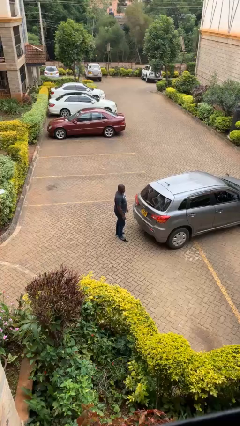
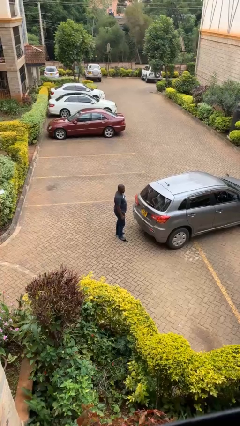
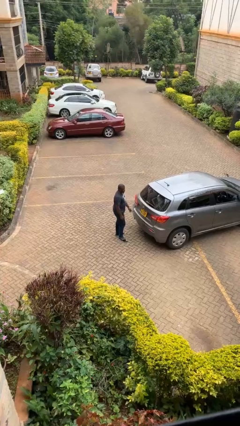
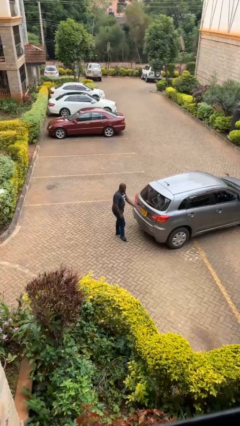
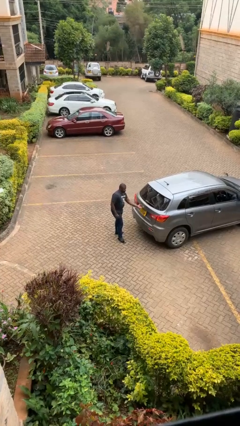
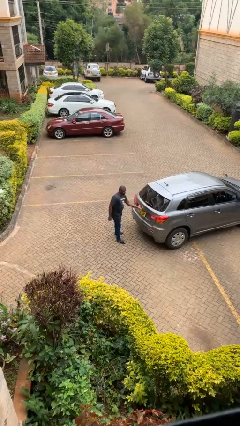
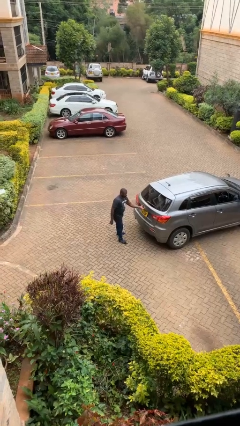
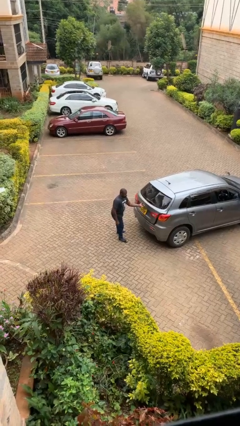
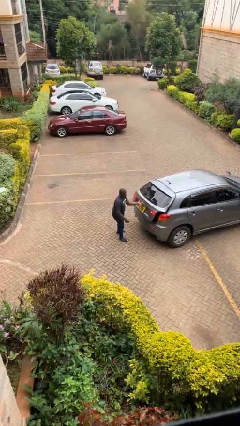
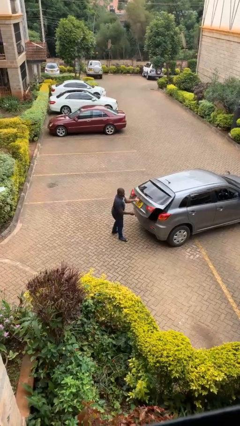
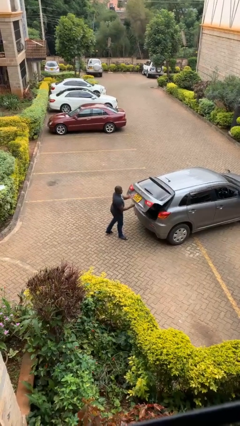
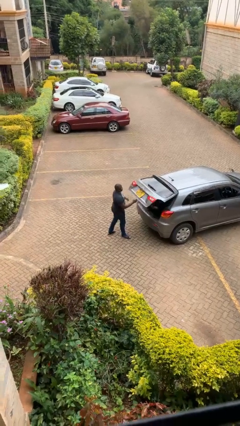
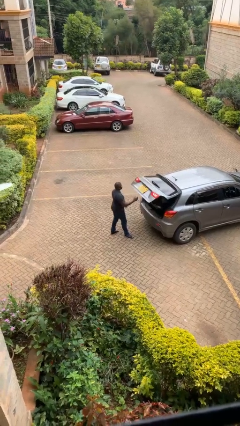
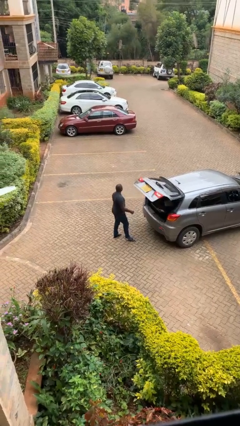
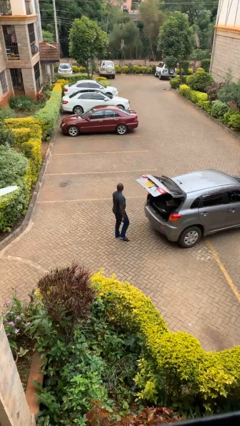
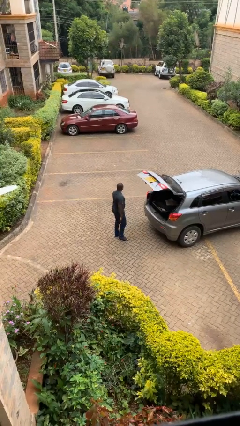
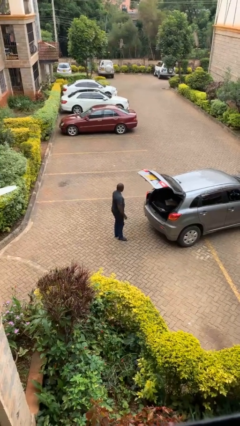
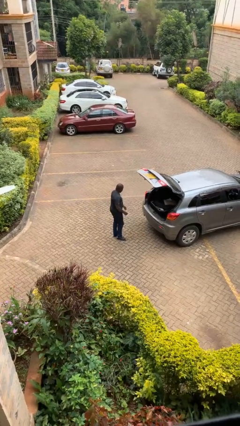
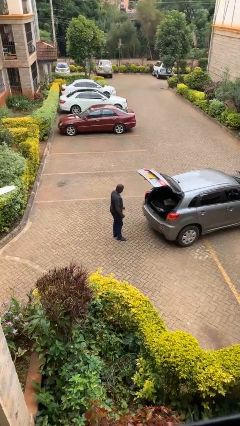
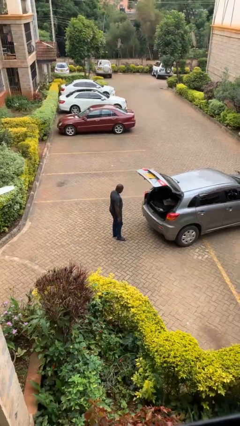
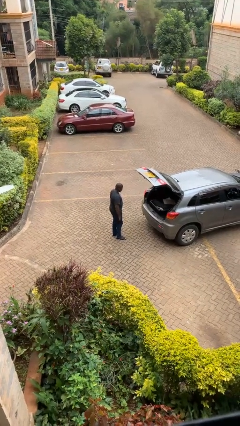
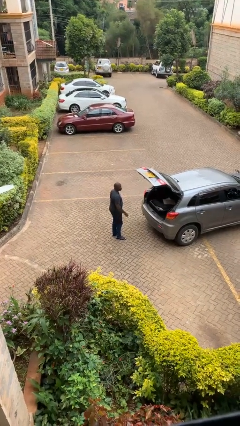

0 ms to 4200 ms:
person opens car trunk

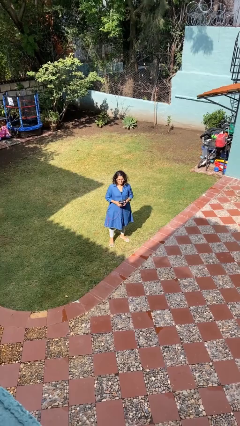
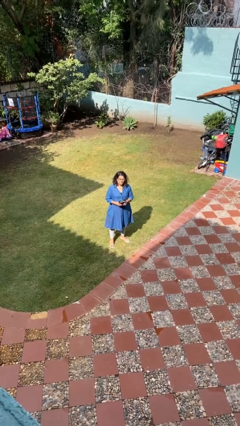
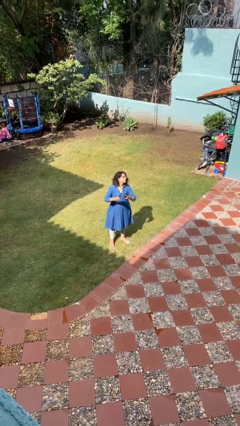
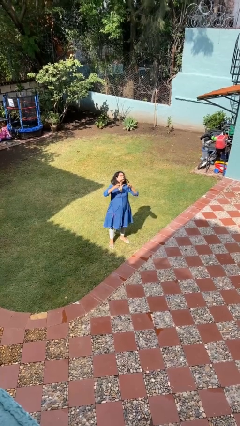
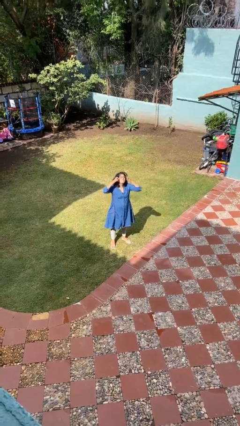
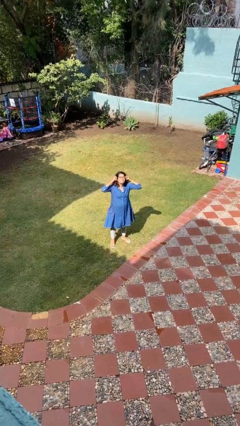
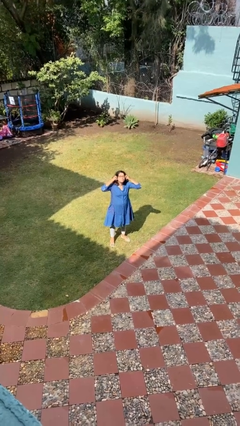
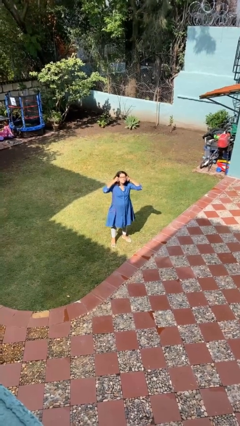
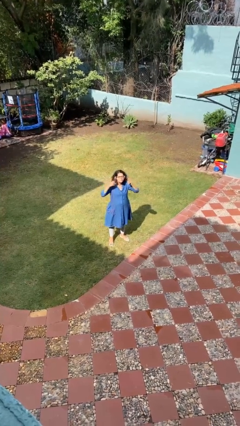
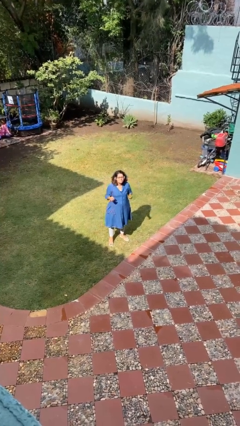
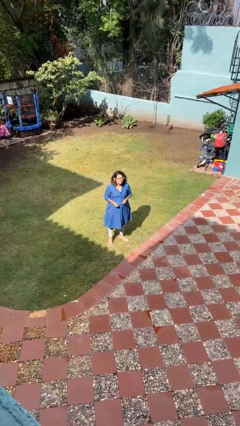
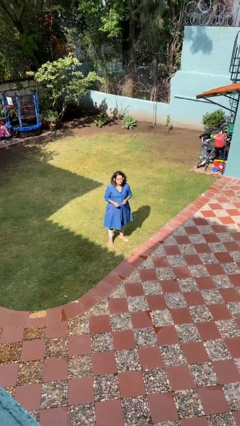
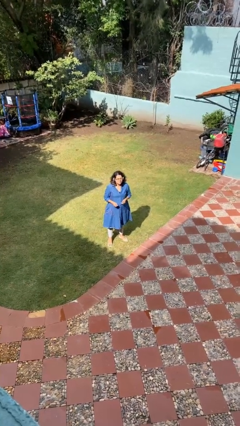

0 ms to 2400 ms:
person puts on headphones

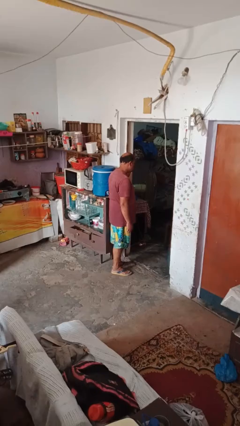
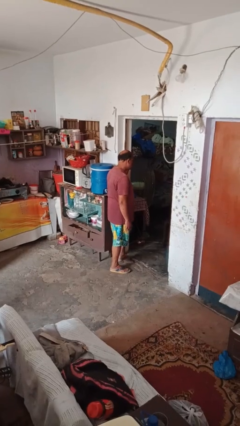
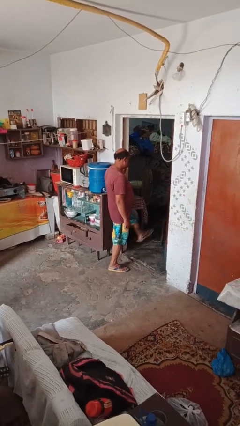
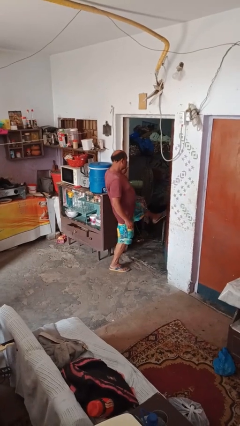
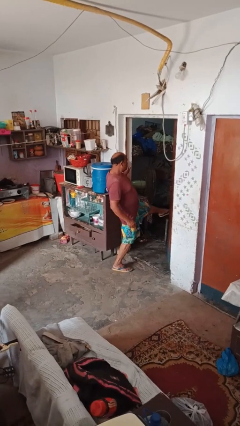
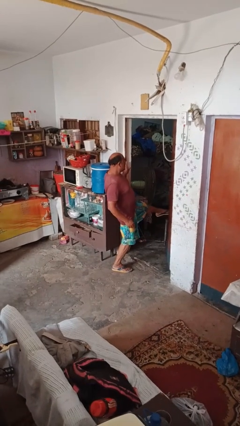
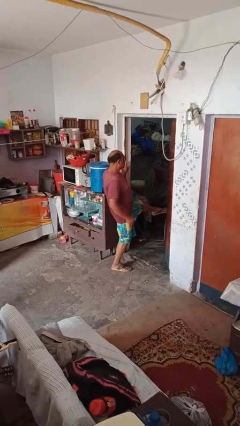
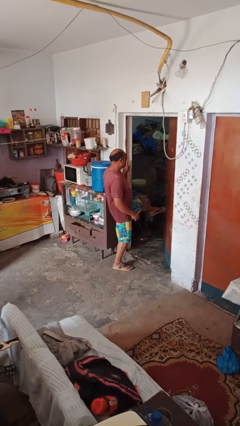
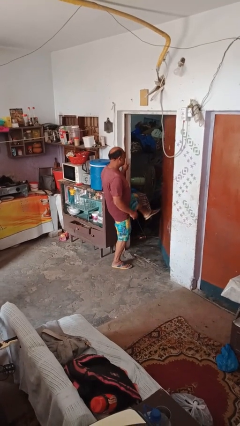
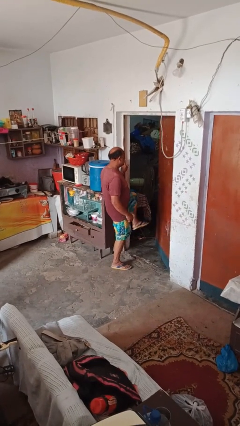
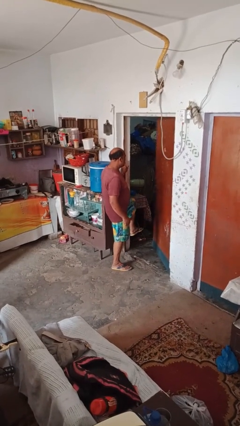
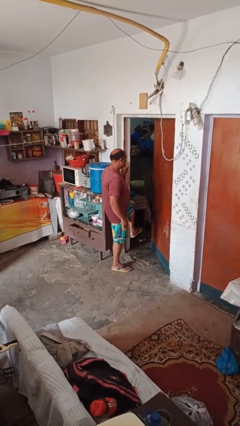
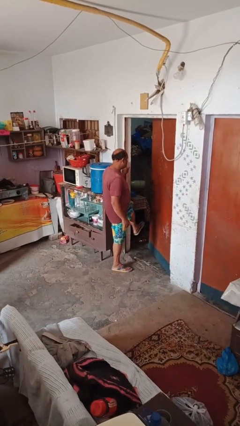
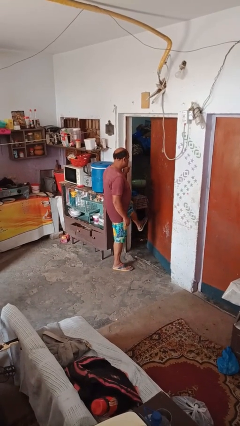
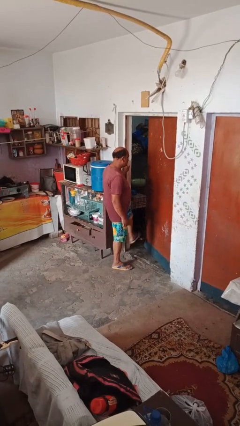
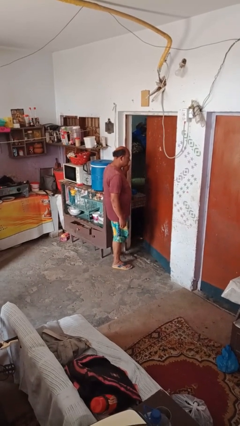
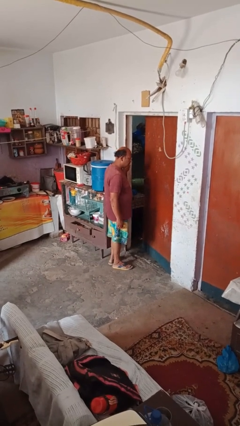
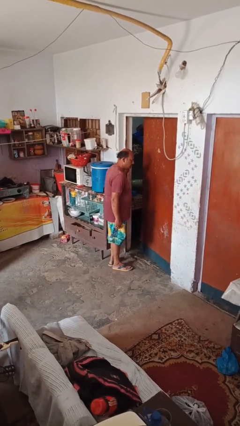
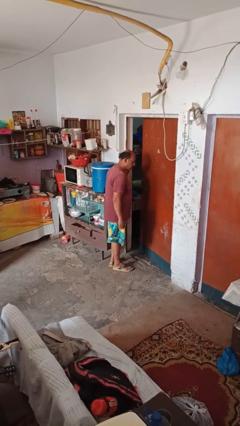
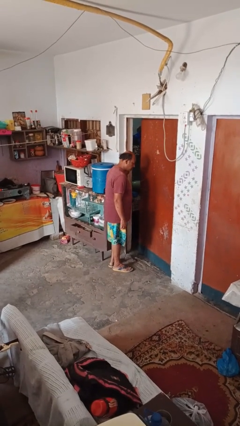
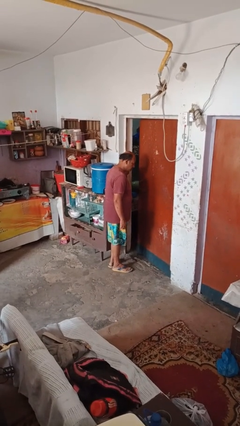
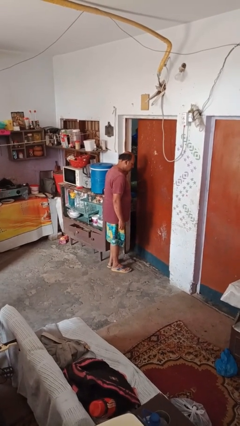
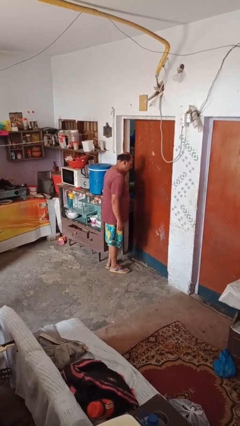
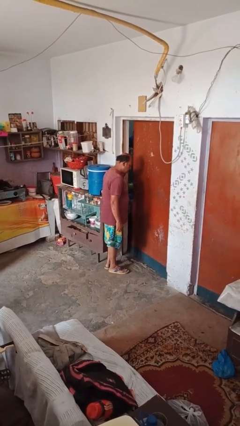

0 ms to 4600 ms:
person closes door with foot

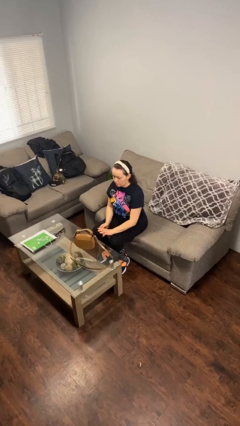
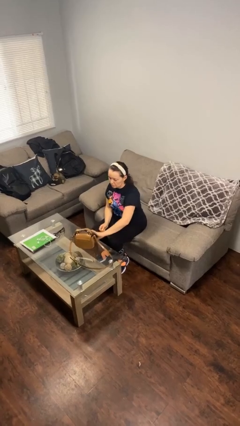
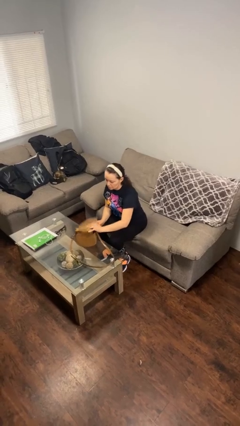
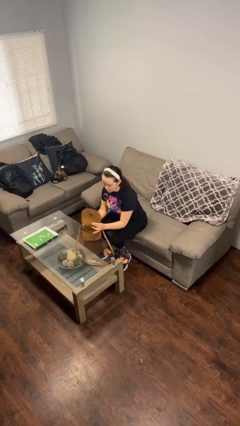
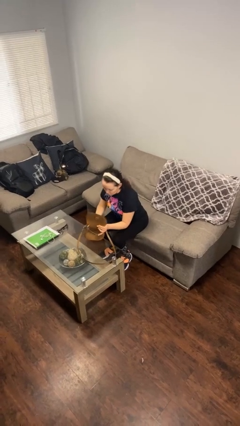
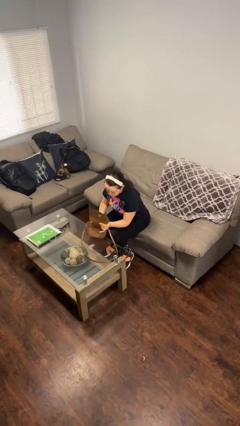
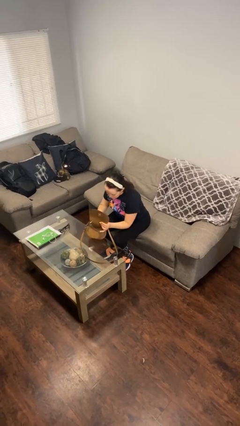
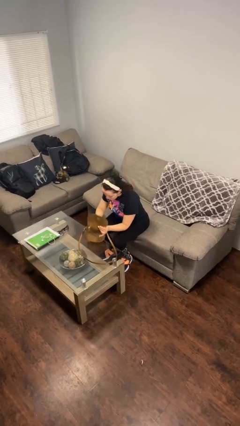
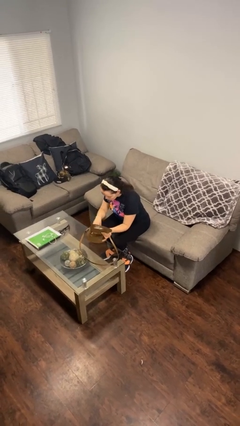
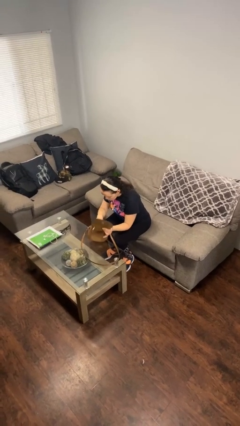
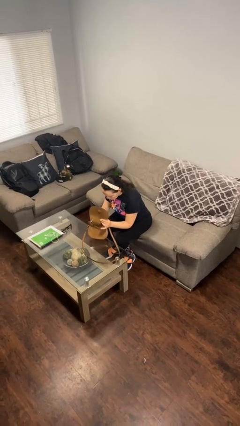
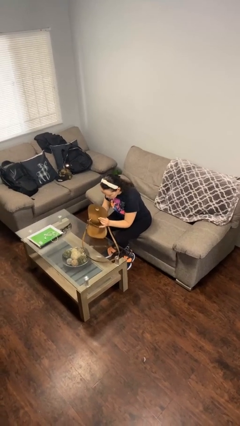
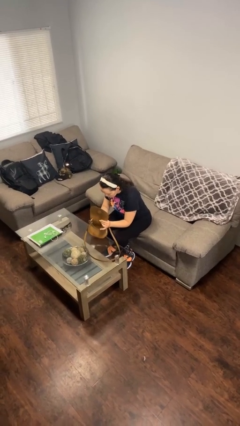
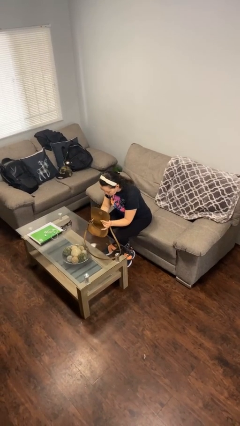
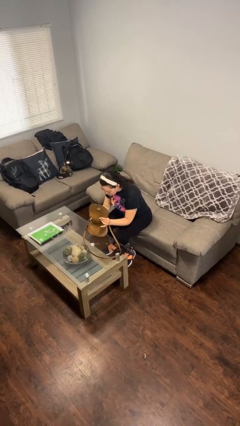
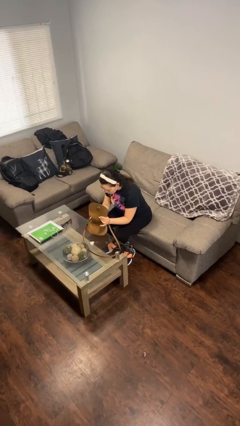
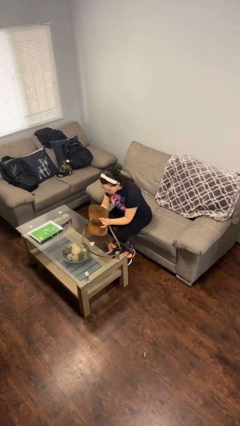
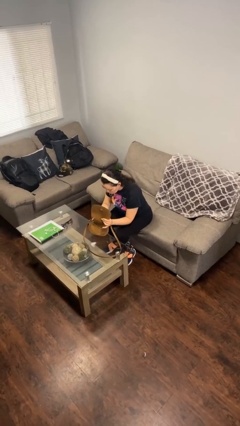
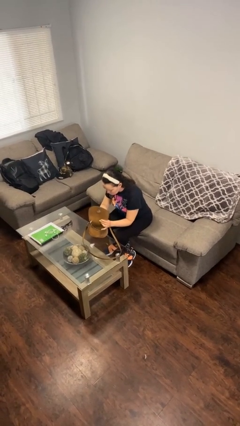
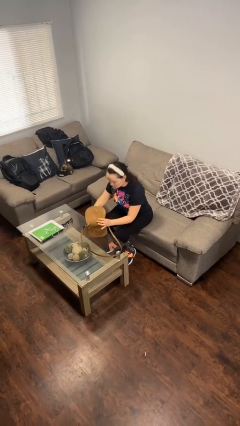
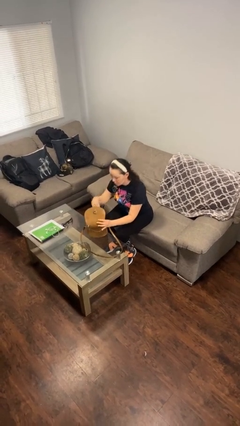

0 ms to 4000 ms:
person searches in purse

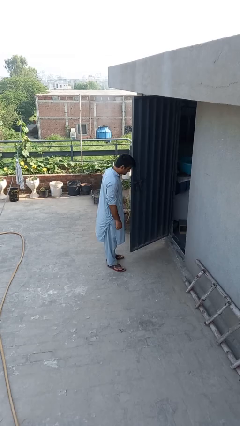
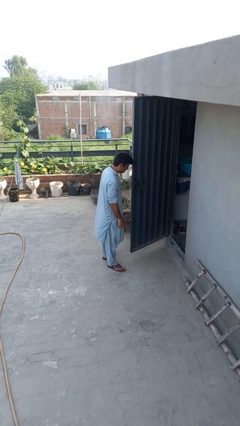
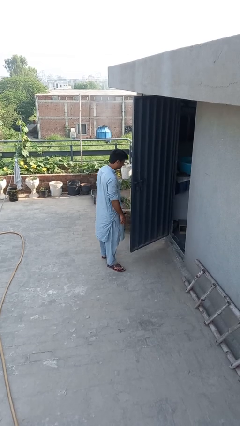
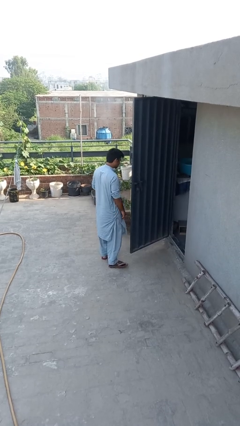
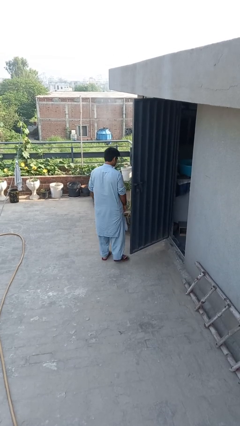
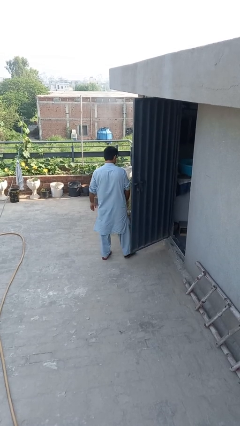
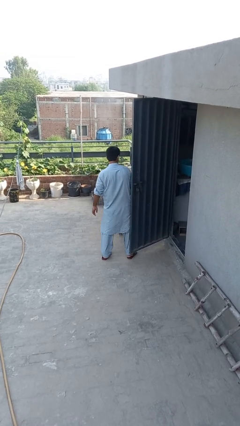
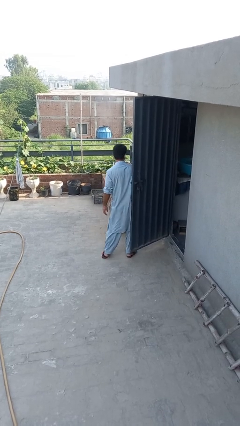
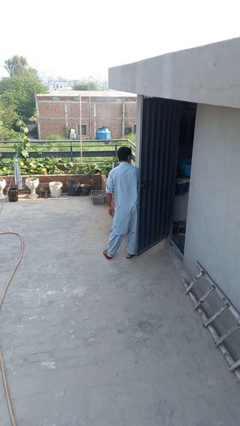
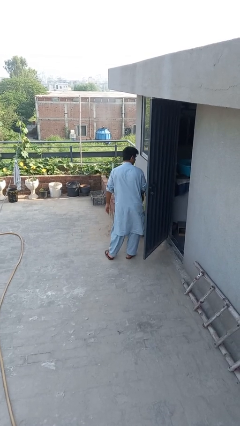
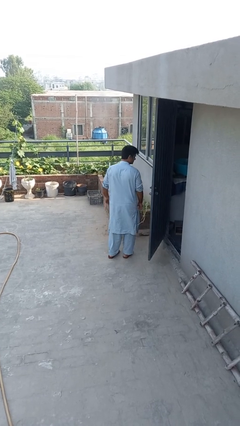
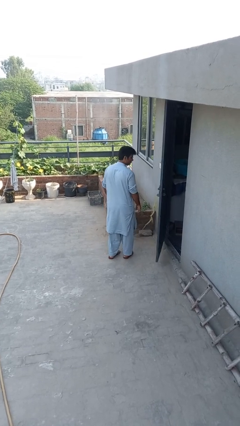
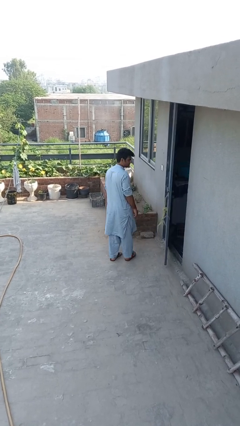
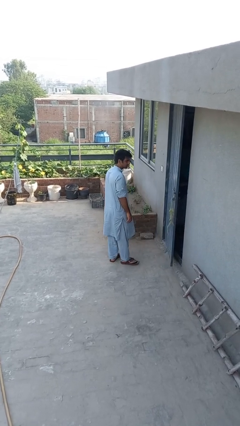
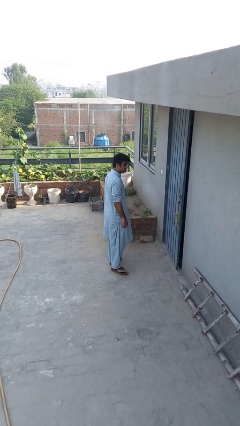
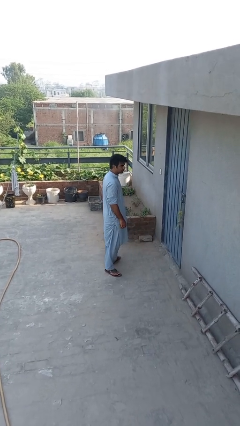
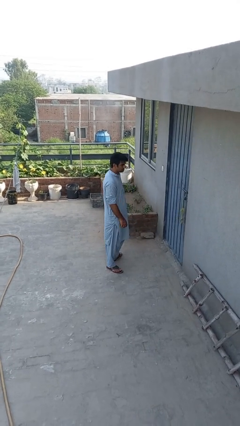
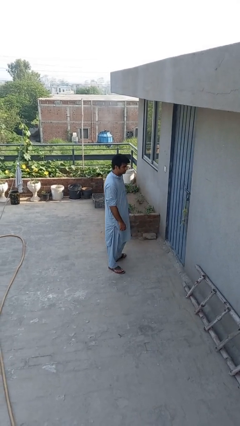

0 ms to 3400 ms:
person closes door with hip
